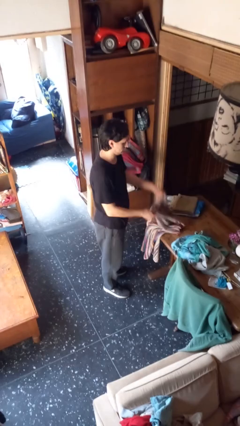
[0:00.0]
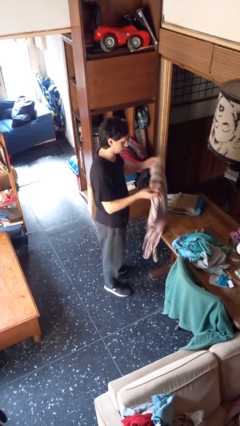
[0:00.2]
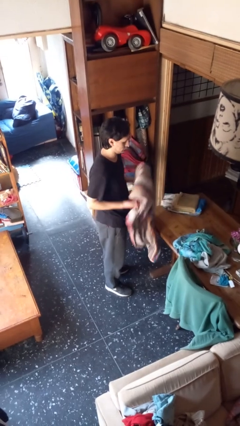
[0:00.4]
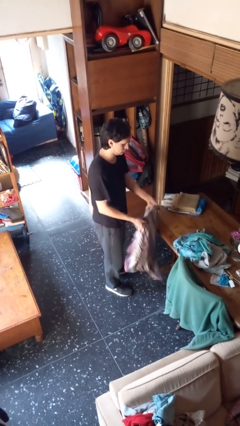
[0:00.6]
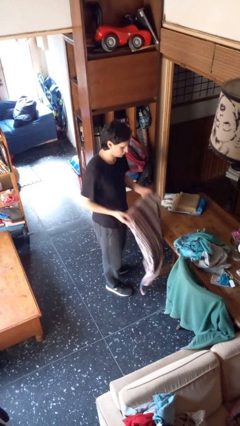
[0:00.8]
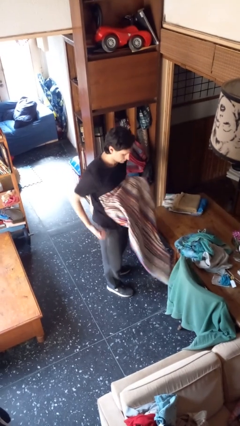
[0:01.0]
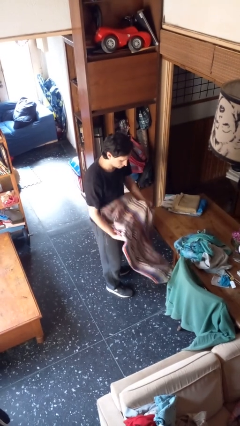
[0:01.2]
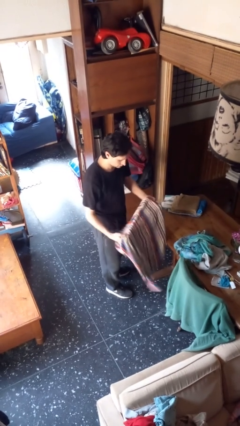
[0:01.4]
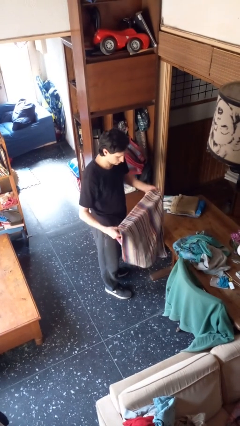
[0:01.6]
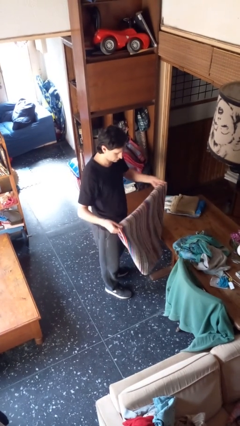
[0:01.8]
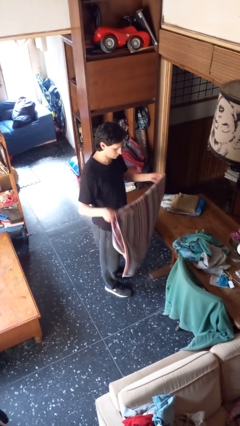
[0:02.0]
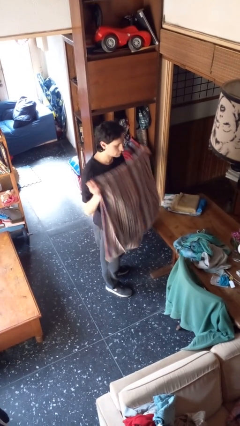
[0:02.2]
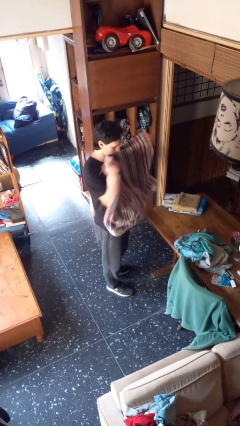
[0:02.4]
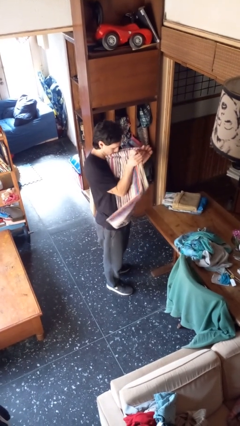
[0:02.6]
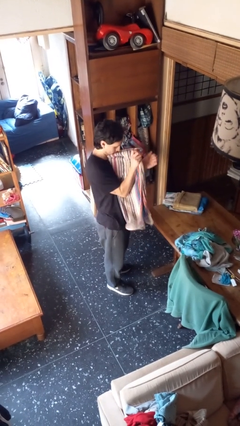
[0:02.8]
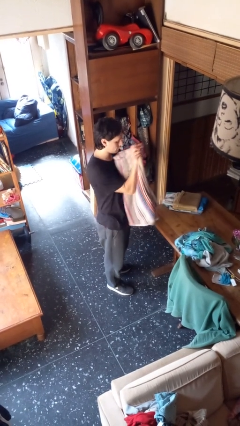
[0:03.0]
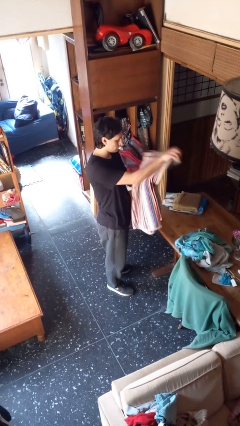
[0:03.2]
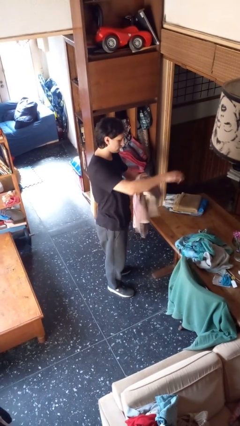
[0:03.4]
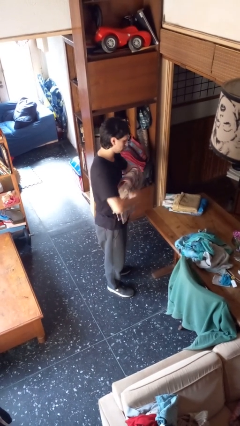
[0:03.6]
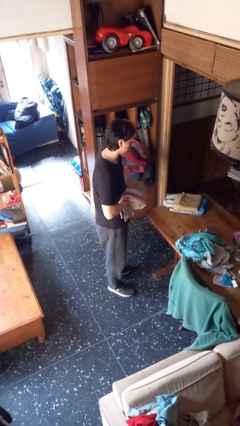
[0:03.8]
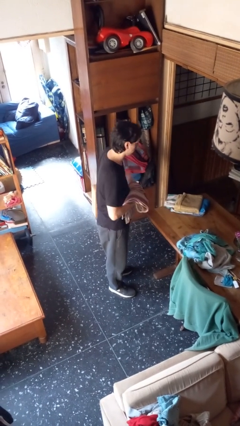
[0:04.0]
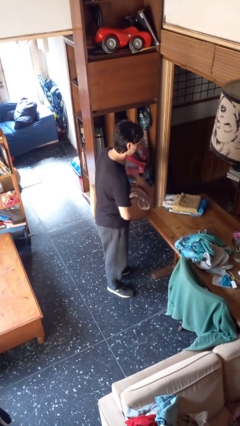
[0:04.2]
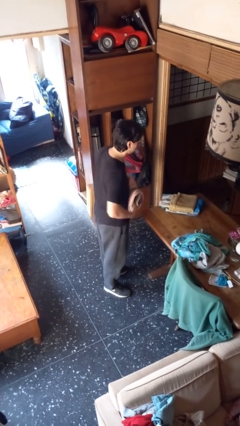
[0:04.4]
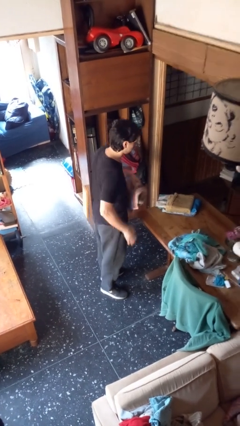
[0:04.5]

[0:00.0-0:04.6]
person folds towel

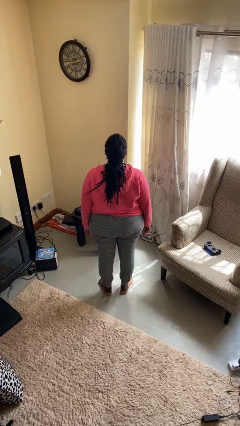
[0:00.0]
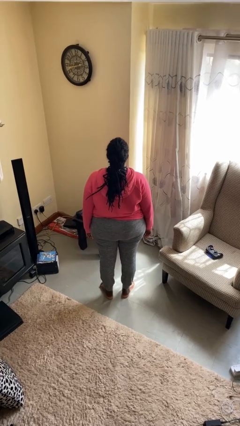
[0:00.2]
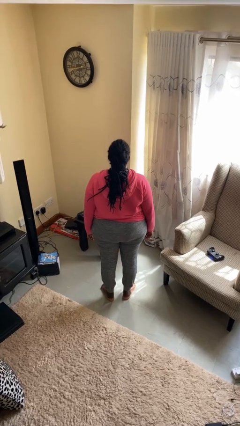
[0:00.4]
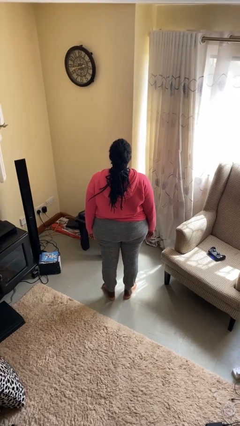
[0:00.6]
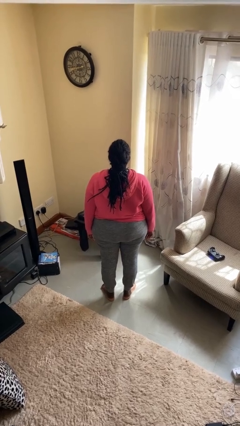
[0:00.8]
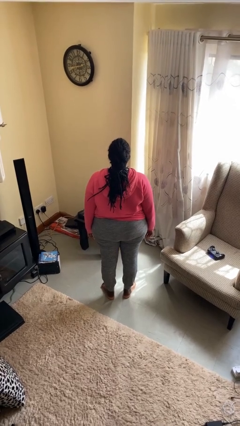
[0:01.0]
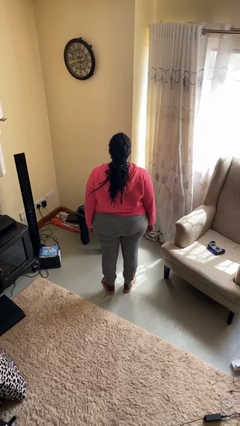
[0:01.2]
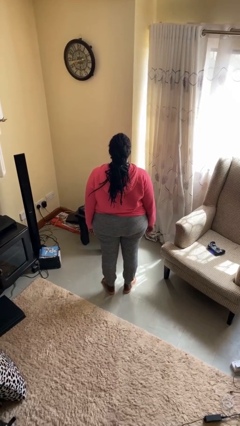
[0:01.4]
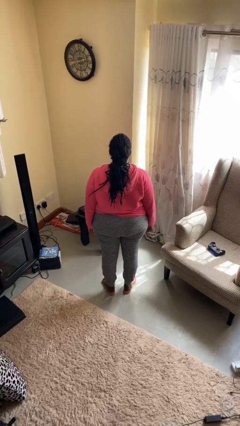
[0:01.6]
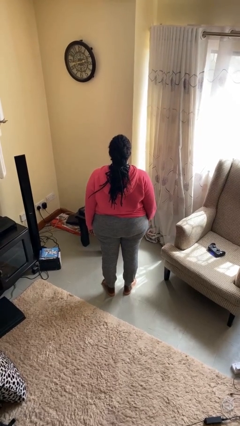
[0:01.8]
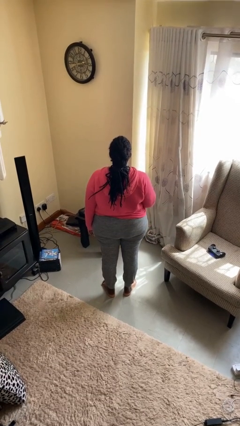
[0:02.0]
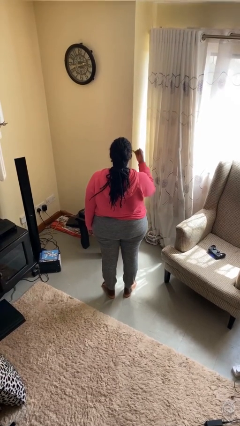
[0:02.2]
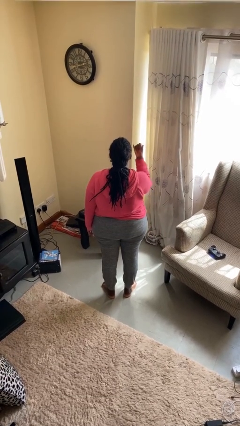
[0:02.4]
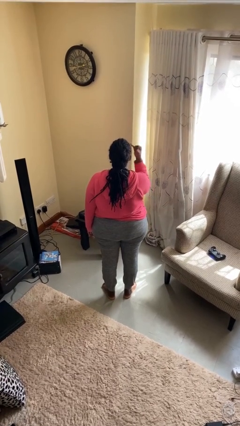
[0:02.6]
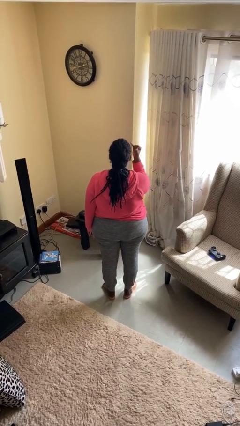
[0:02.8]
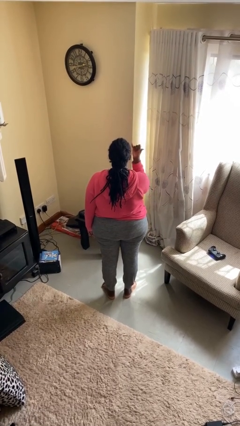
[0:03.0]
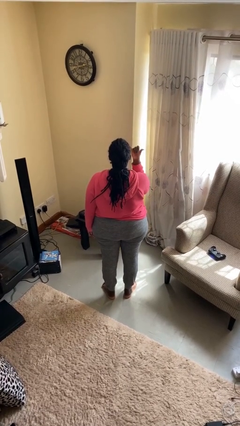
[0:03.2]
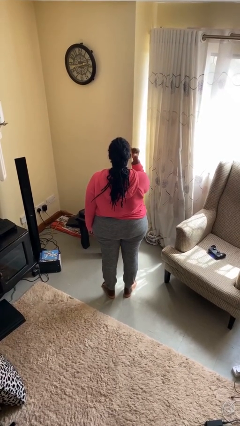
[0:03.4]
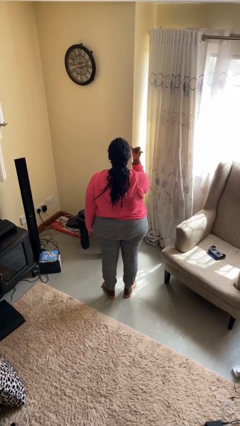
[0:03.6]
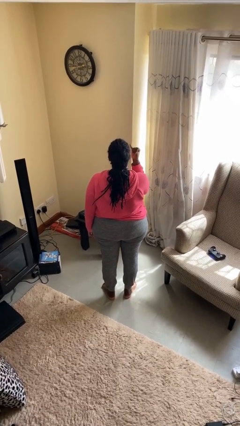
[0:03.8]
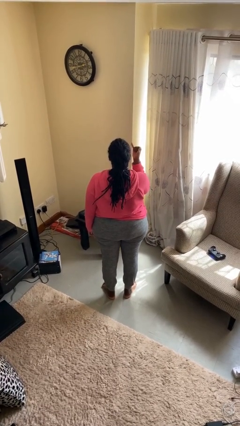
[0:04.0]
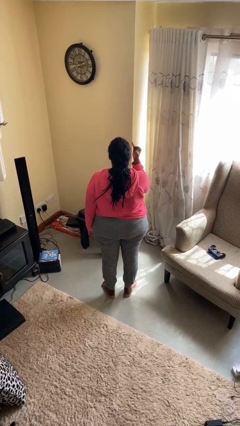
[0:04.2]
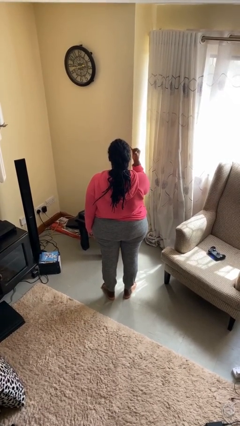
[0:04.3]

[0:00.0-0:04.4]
person gestures hang loose

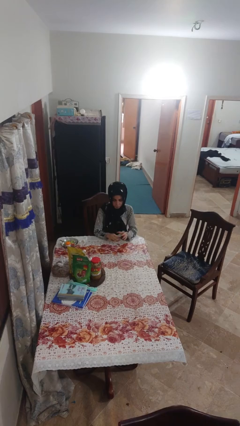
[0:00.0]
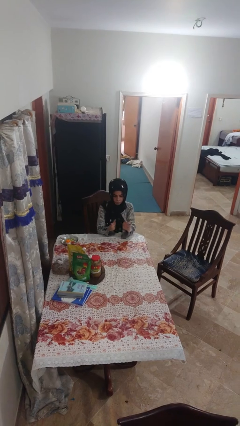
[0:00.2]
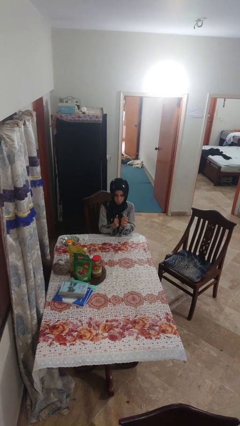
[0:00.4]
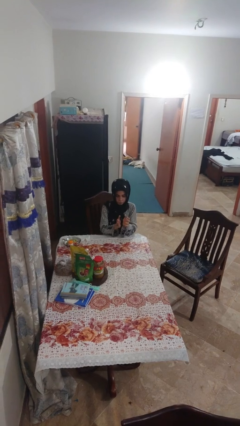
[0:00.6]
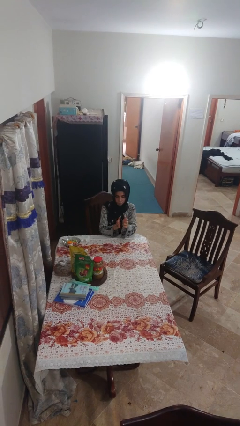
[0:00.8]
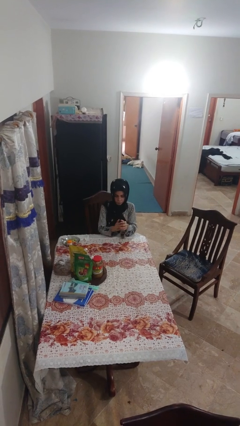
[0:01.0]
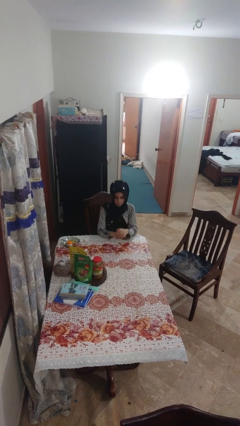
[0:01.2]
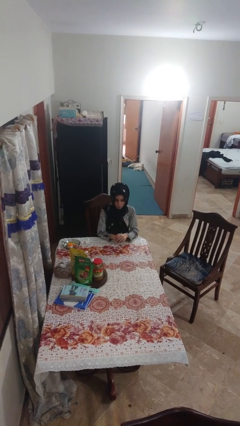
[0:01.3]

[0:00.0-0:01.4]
person claps hands

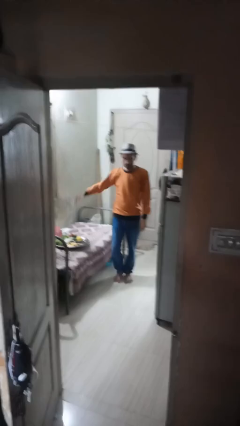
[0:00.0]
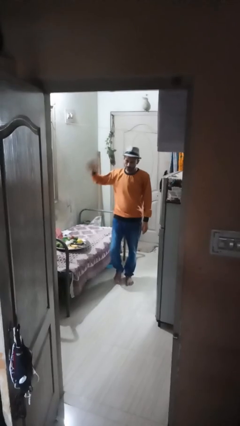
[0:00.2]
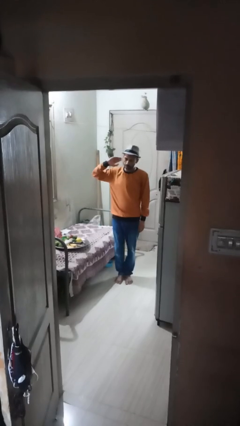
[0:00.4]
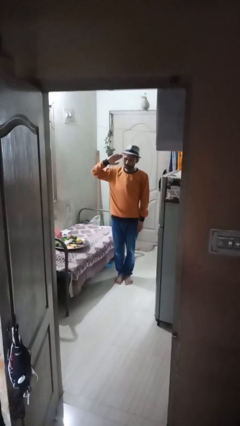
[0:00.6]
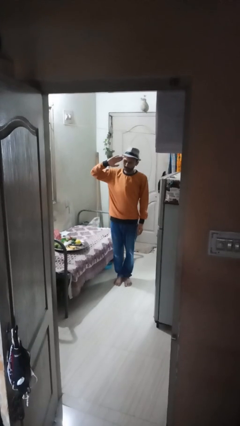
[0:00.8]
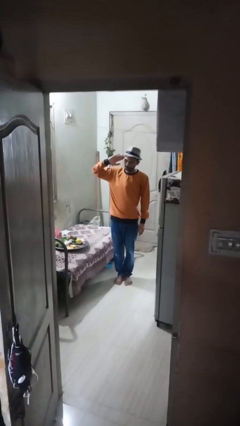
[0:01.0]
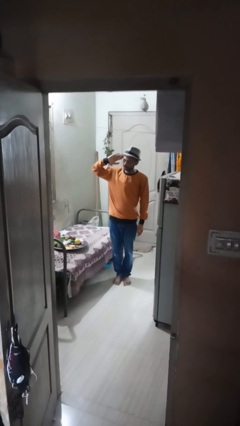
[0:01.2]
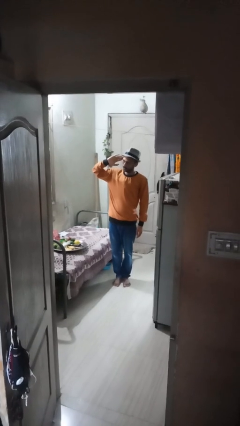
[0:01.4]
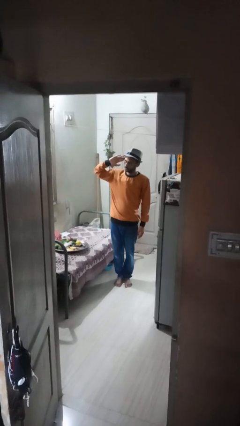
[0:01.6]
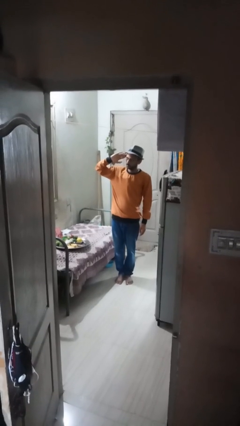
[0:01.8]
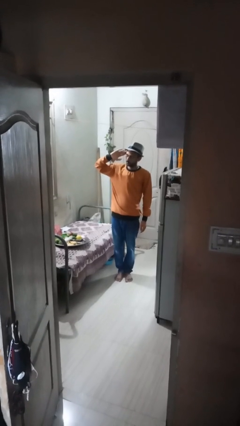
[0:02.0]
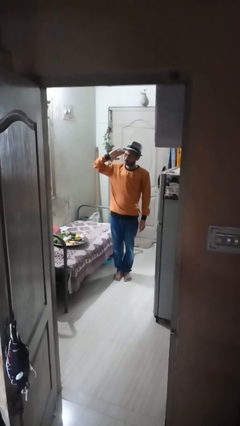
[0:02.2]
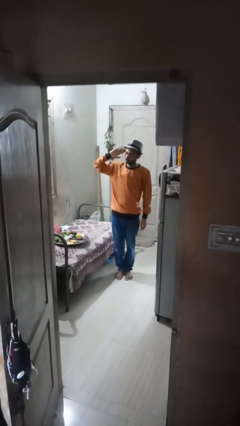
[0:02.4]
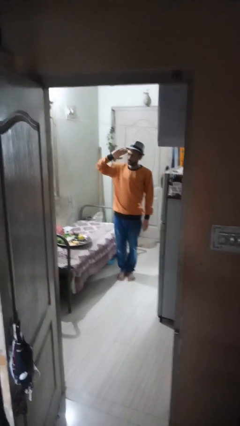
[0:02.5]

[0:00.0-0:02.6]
person salutes

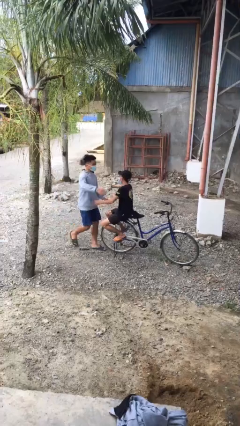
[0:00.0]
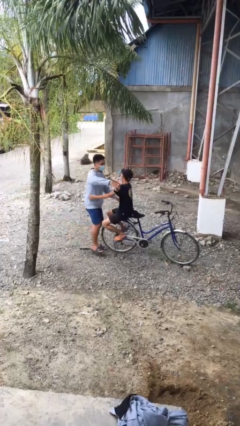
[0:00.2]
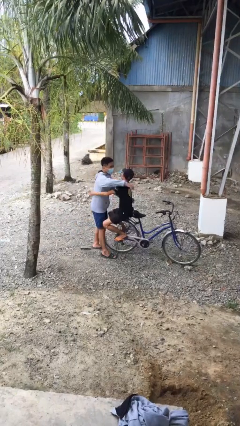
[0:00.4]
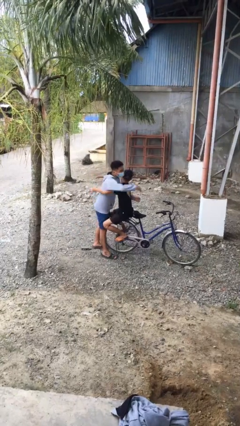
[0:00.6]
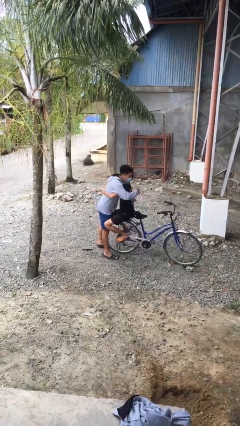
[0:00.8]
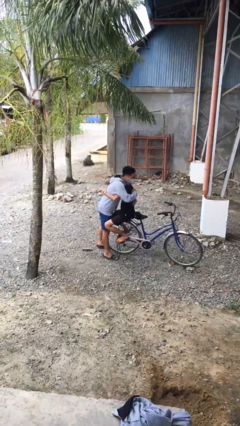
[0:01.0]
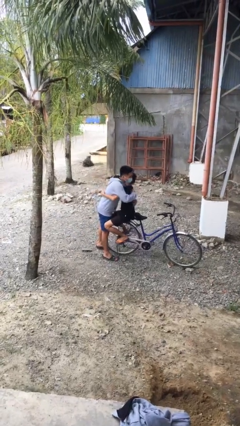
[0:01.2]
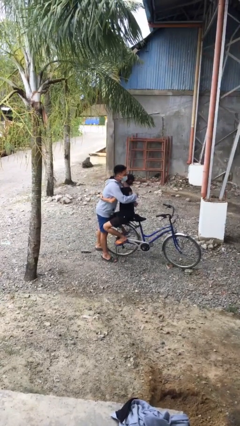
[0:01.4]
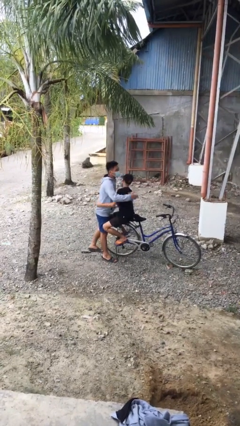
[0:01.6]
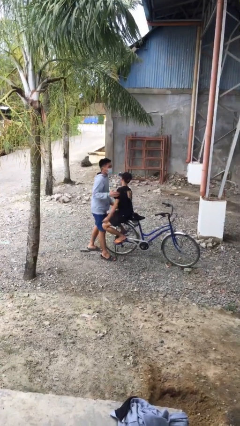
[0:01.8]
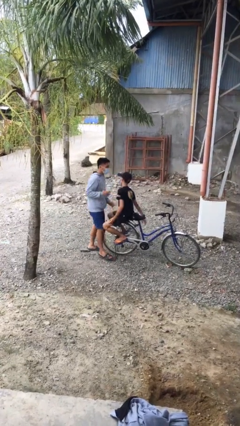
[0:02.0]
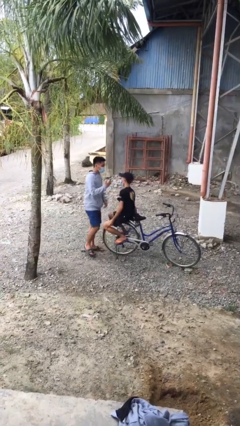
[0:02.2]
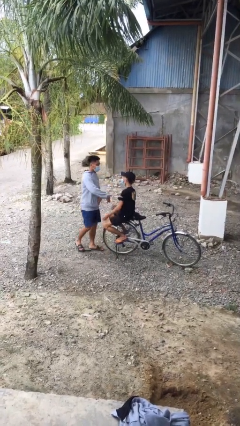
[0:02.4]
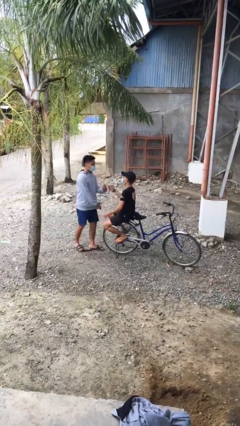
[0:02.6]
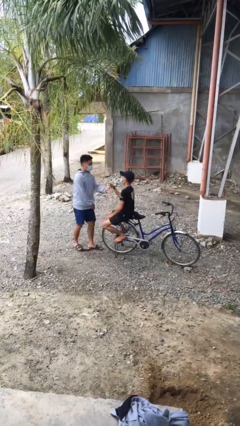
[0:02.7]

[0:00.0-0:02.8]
person embraces person

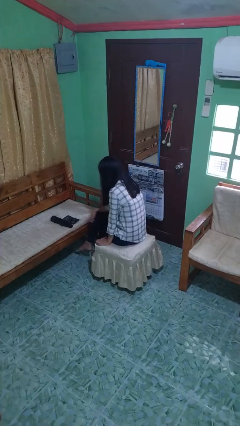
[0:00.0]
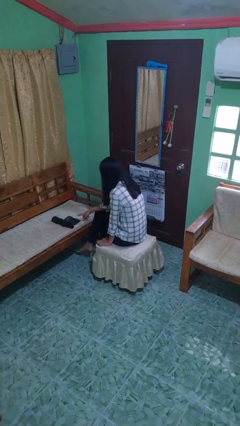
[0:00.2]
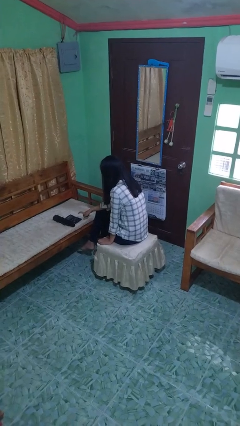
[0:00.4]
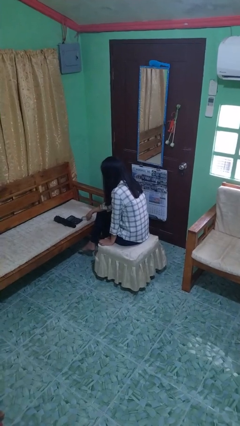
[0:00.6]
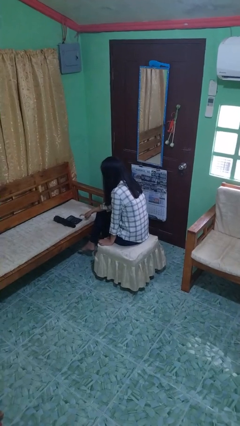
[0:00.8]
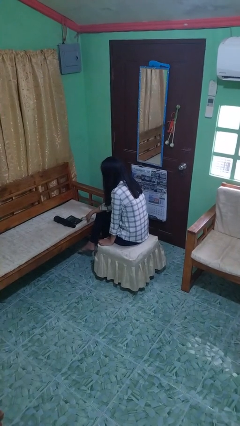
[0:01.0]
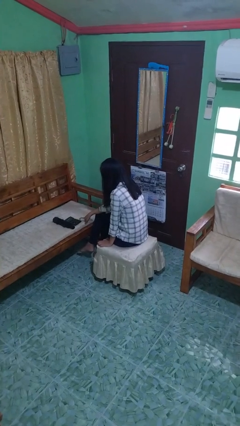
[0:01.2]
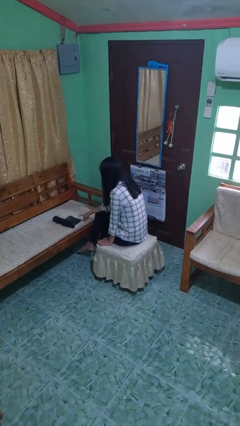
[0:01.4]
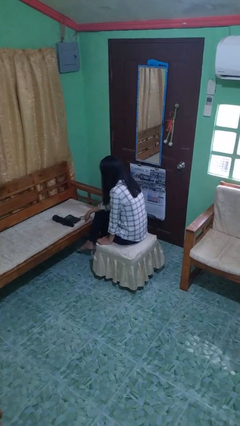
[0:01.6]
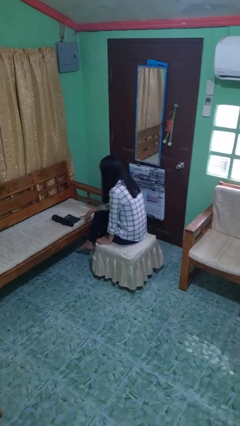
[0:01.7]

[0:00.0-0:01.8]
person taps object with finger
